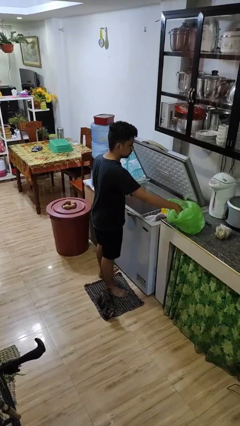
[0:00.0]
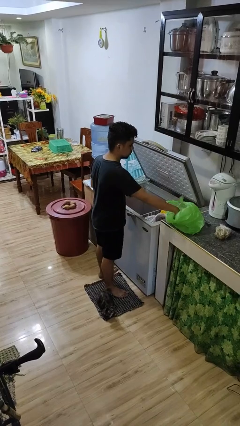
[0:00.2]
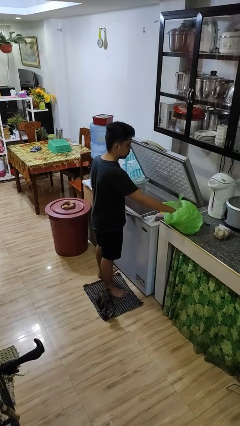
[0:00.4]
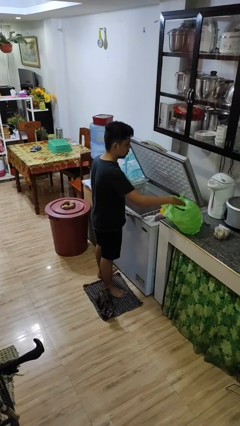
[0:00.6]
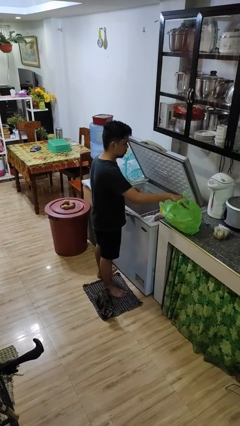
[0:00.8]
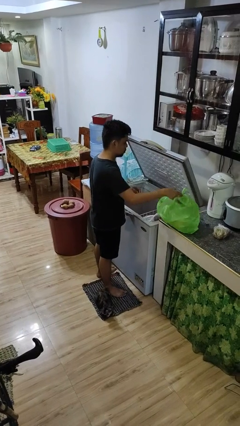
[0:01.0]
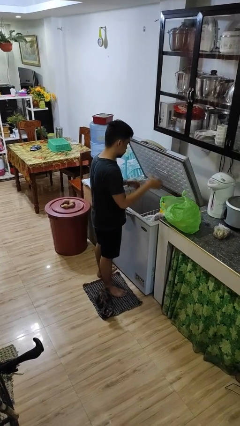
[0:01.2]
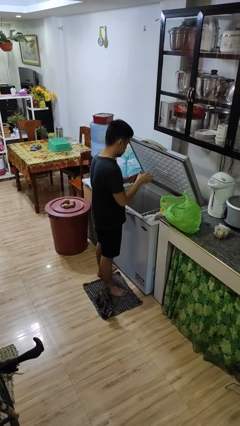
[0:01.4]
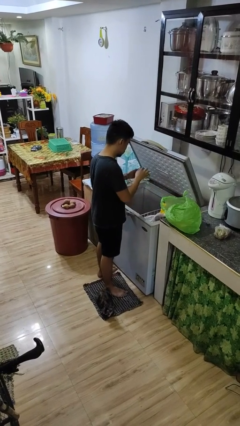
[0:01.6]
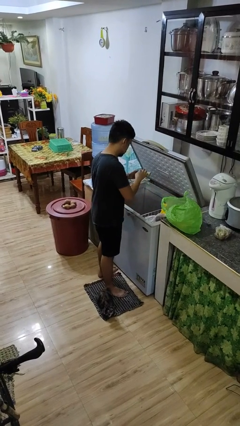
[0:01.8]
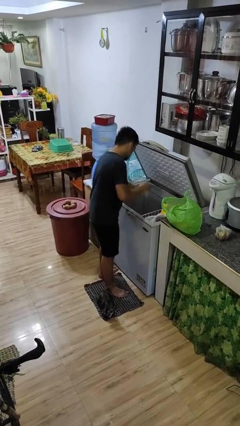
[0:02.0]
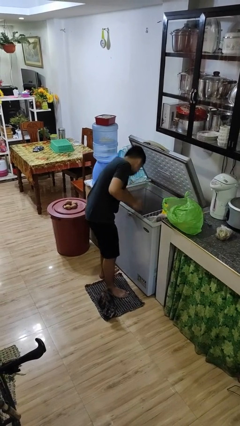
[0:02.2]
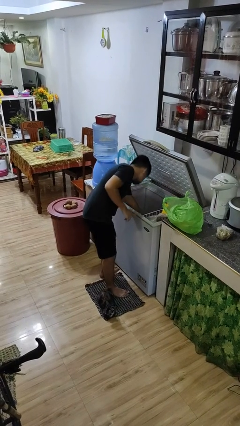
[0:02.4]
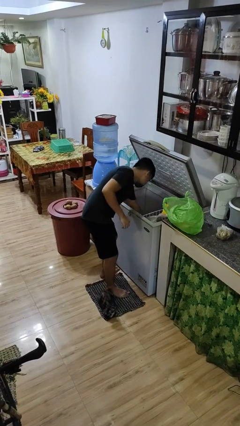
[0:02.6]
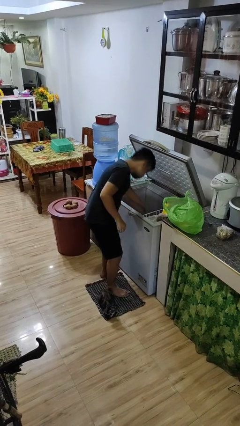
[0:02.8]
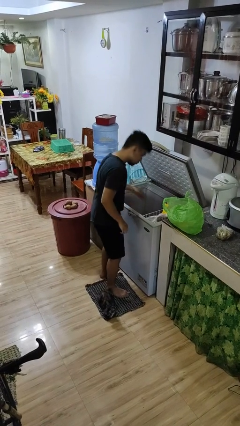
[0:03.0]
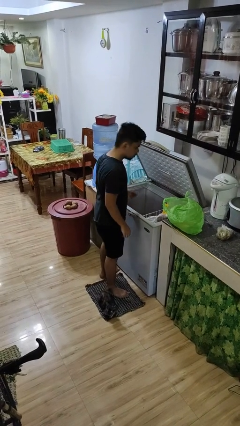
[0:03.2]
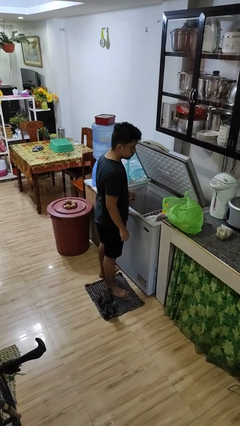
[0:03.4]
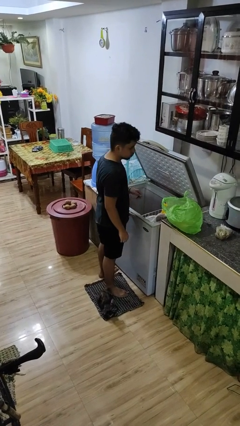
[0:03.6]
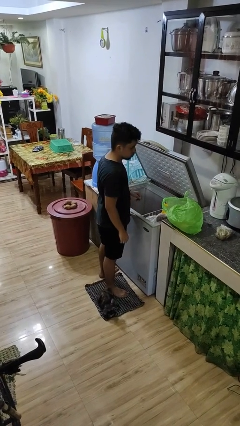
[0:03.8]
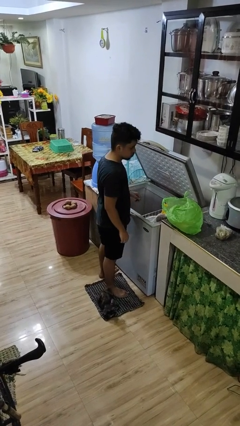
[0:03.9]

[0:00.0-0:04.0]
person loads groceries into refrigerator

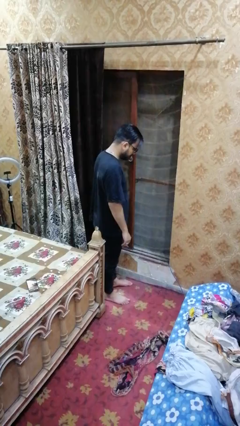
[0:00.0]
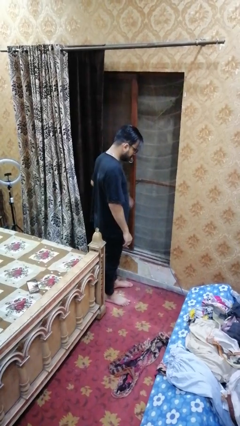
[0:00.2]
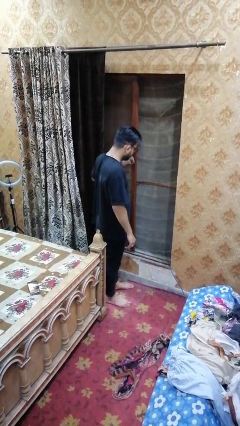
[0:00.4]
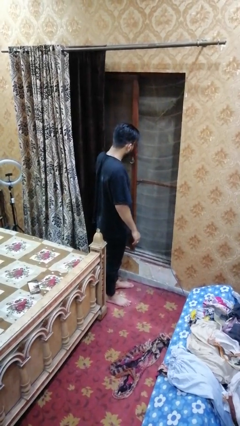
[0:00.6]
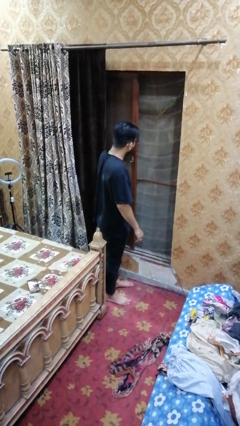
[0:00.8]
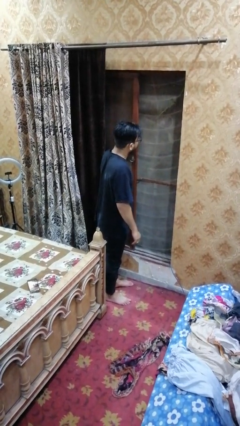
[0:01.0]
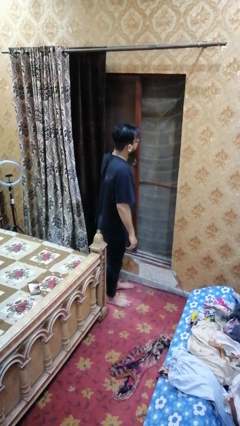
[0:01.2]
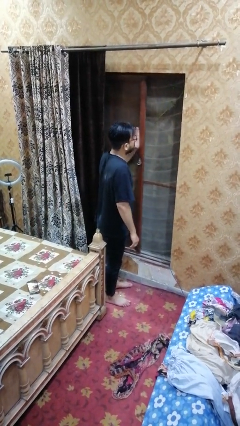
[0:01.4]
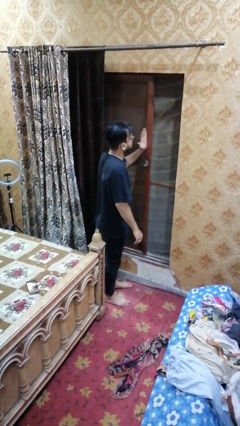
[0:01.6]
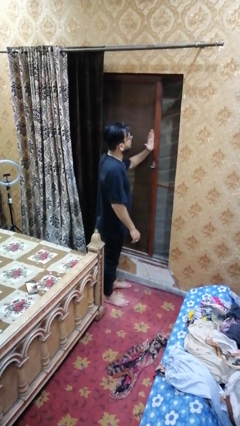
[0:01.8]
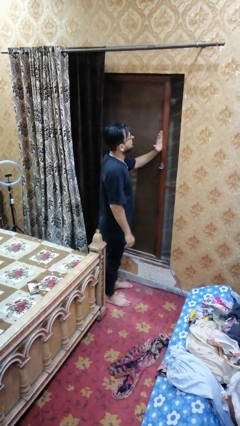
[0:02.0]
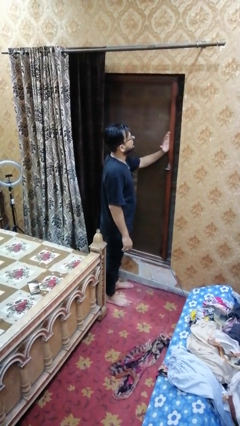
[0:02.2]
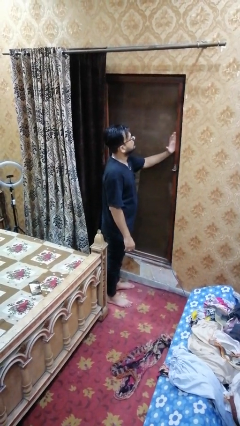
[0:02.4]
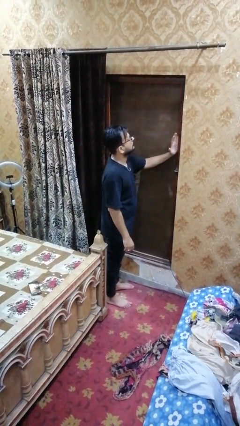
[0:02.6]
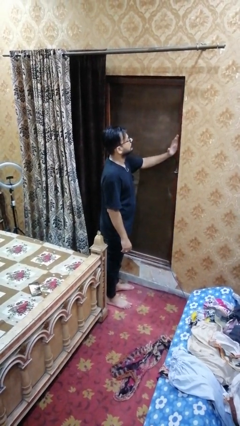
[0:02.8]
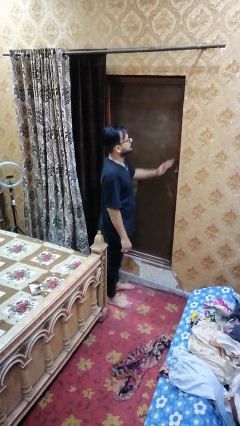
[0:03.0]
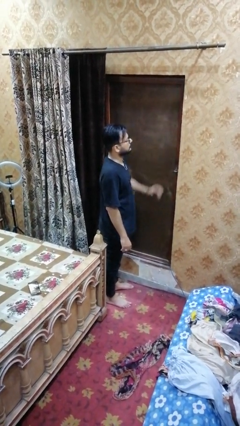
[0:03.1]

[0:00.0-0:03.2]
person closes sliding door

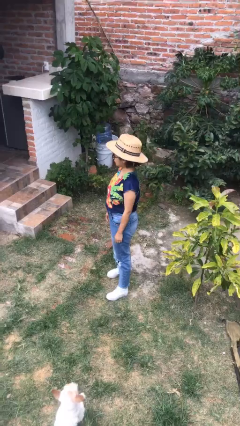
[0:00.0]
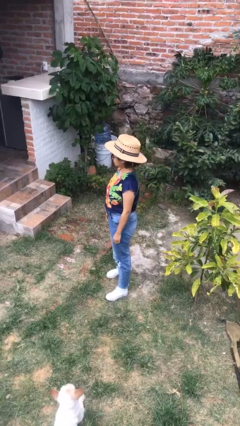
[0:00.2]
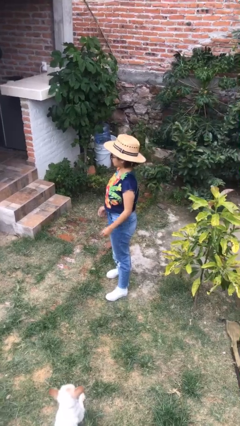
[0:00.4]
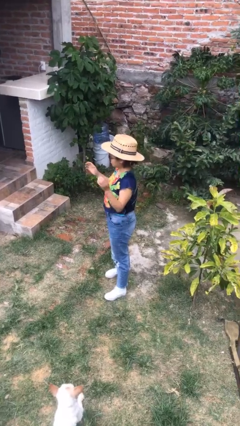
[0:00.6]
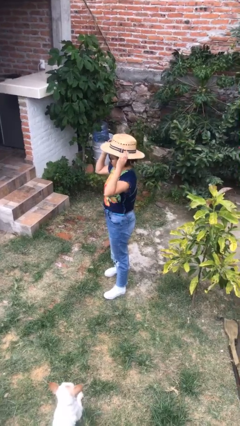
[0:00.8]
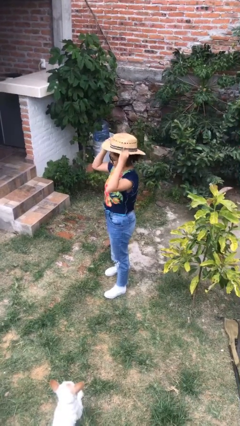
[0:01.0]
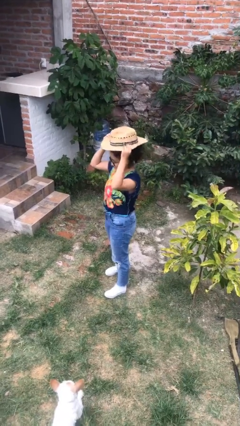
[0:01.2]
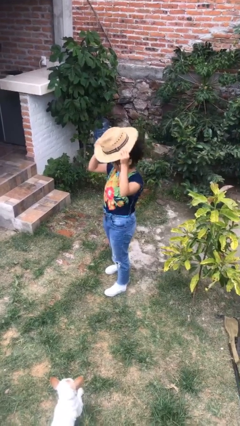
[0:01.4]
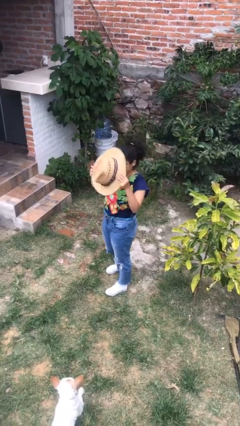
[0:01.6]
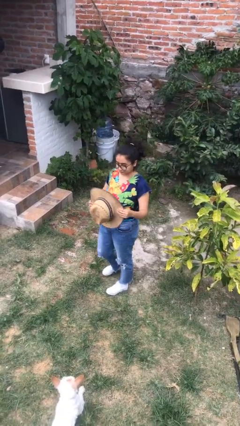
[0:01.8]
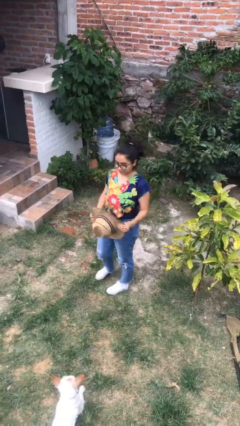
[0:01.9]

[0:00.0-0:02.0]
person takes off hat

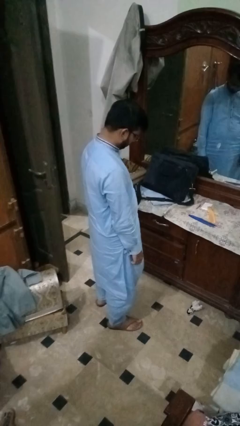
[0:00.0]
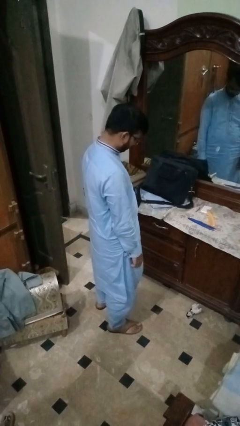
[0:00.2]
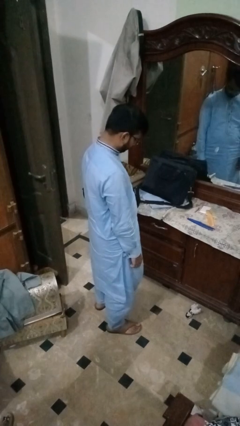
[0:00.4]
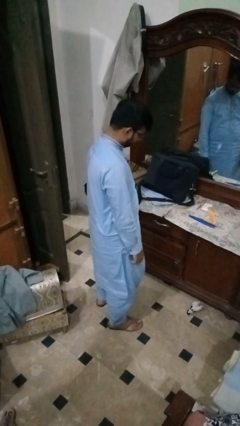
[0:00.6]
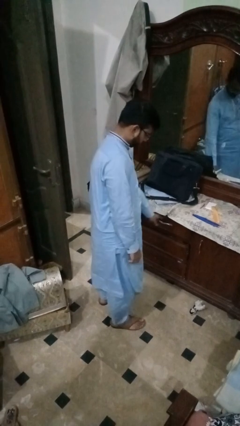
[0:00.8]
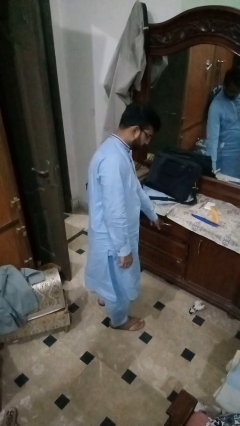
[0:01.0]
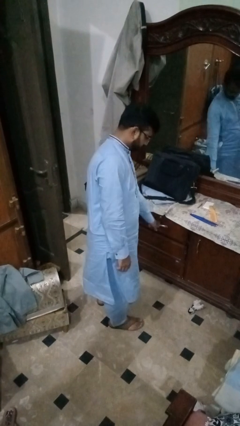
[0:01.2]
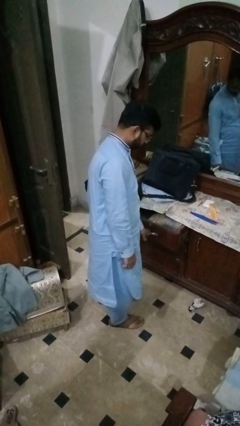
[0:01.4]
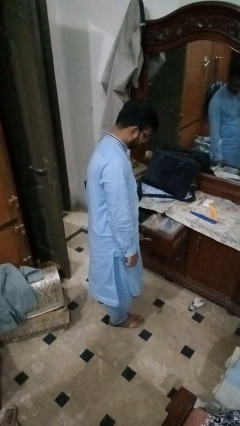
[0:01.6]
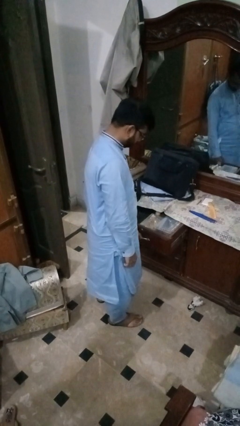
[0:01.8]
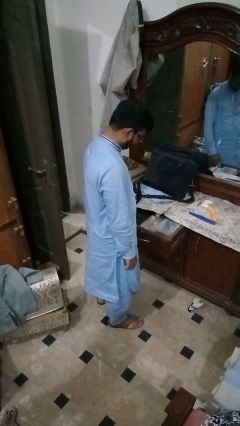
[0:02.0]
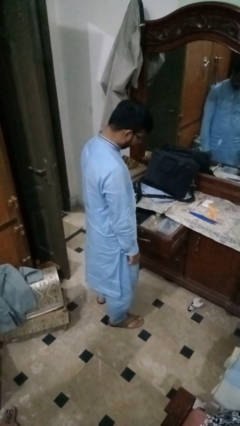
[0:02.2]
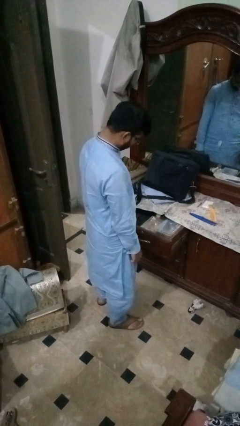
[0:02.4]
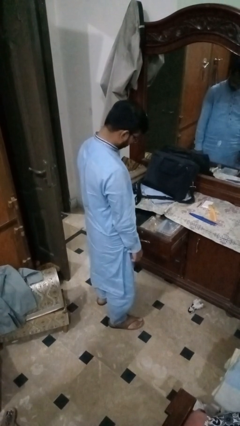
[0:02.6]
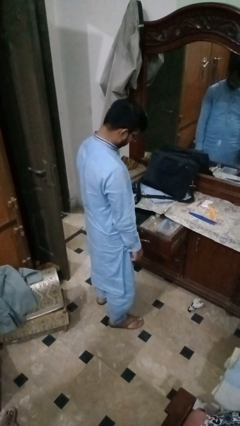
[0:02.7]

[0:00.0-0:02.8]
person opens dresser drawer

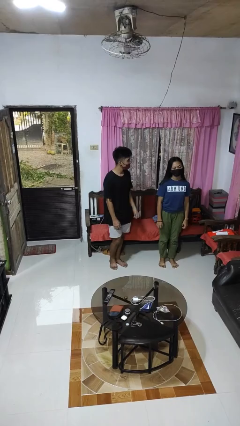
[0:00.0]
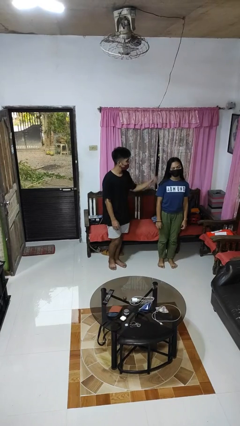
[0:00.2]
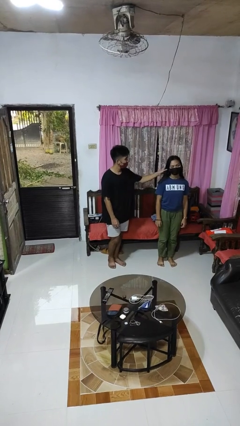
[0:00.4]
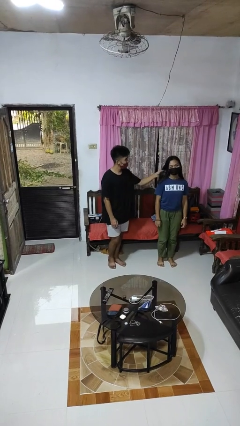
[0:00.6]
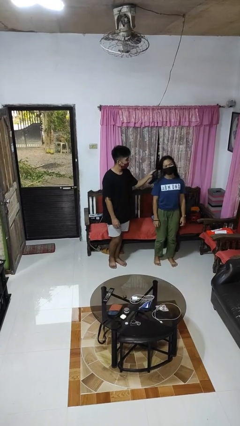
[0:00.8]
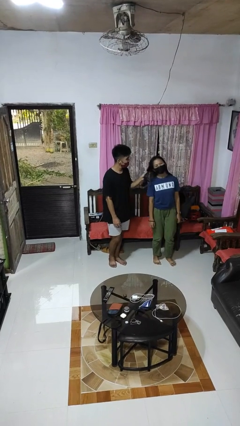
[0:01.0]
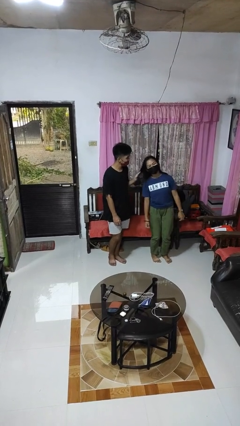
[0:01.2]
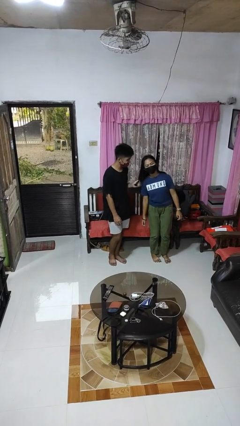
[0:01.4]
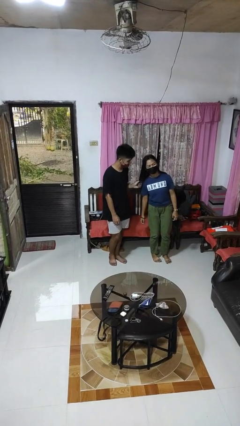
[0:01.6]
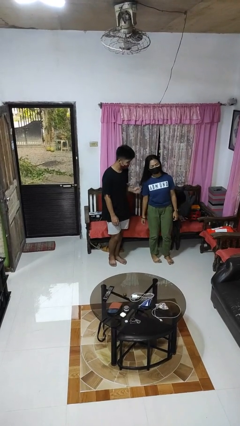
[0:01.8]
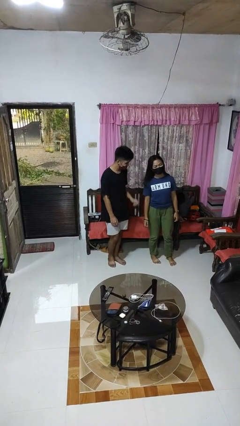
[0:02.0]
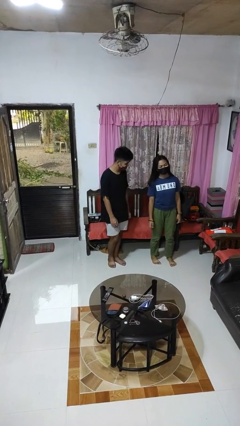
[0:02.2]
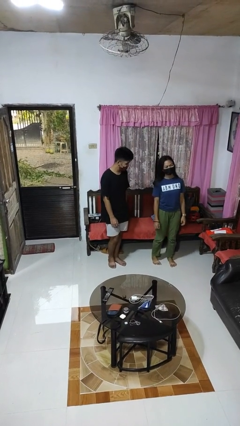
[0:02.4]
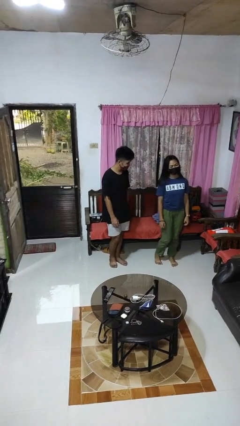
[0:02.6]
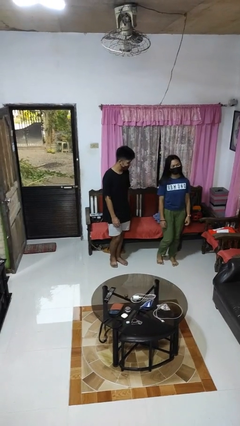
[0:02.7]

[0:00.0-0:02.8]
person grabs person by hair

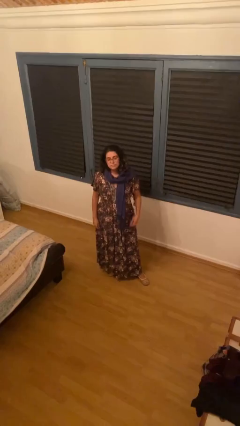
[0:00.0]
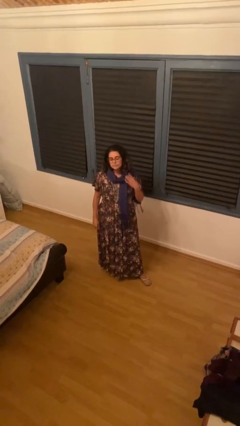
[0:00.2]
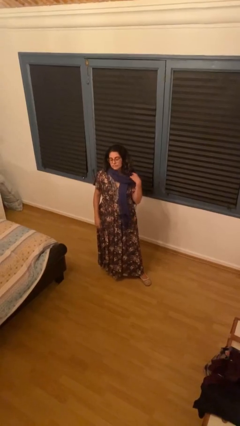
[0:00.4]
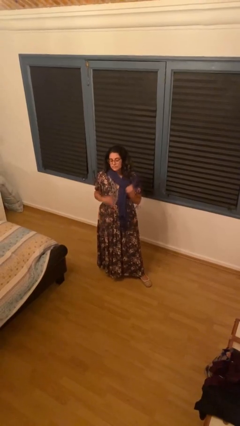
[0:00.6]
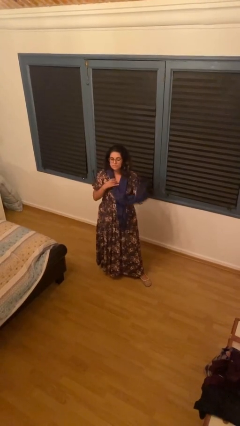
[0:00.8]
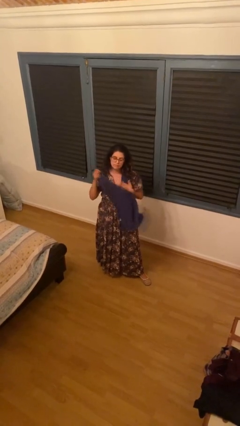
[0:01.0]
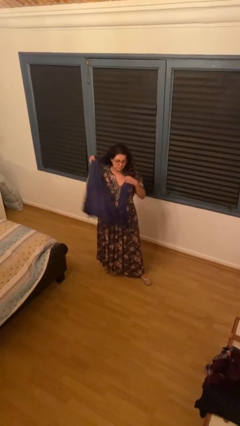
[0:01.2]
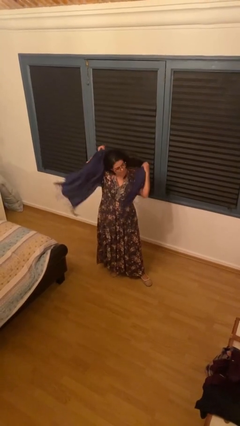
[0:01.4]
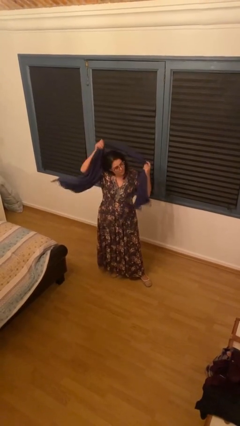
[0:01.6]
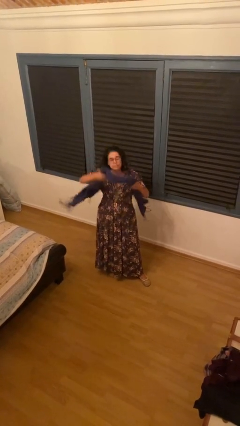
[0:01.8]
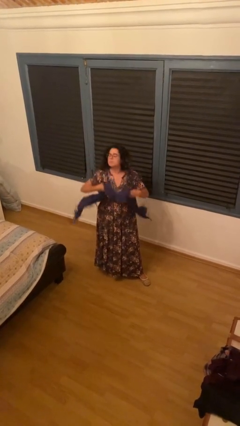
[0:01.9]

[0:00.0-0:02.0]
person takes off scarf

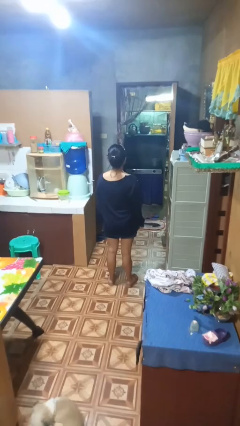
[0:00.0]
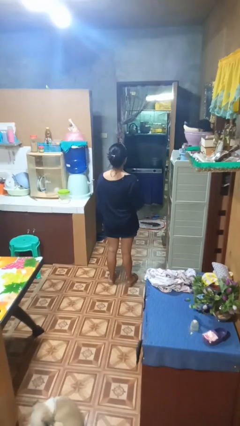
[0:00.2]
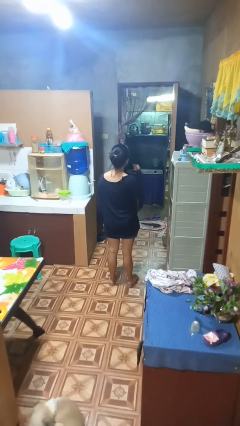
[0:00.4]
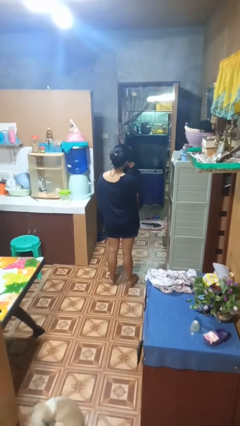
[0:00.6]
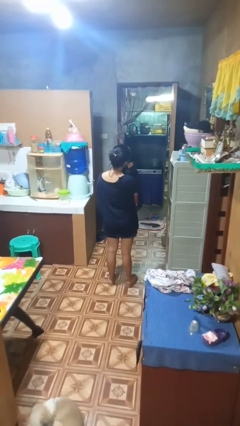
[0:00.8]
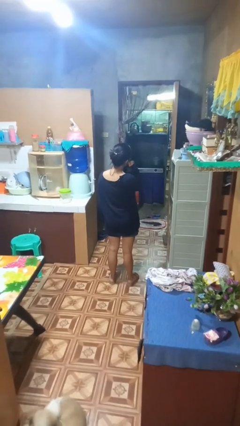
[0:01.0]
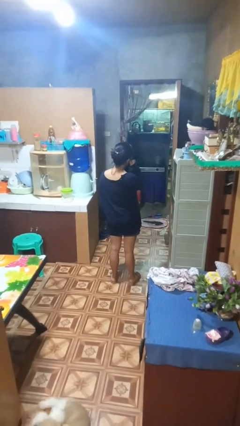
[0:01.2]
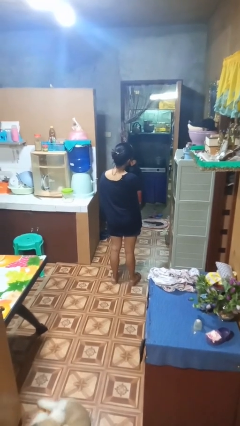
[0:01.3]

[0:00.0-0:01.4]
person gestures call me
